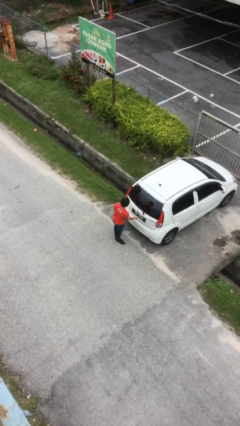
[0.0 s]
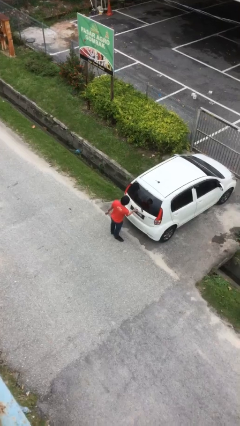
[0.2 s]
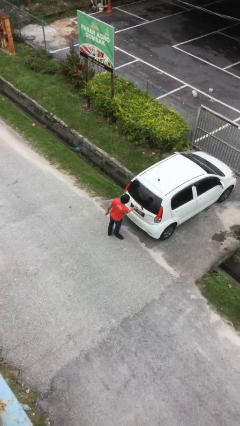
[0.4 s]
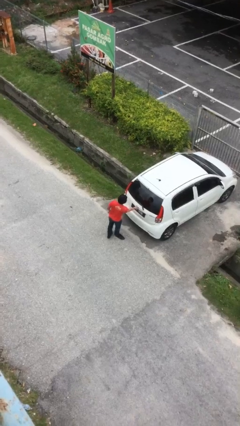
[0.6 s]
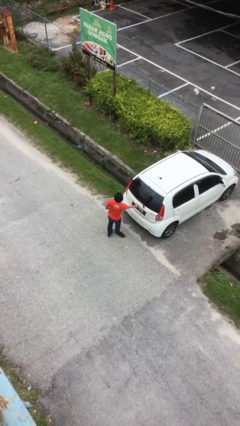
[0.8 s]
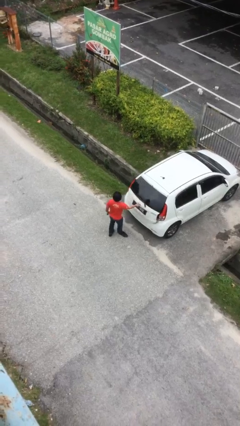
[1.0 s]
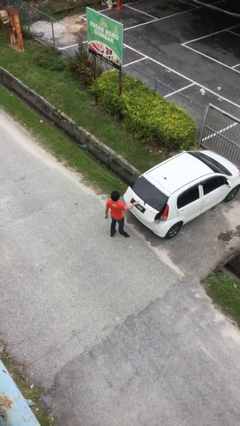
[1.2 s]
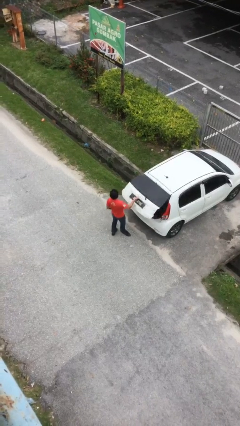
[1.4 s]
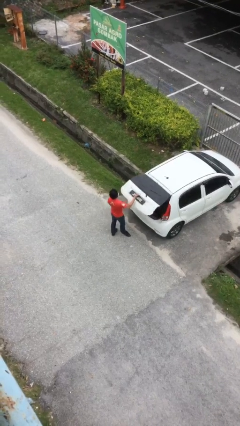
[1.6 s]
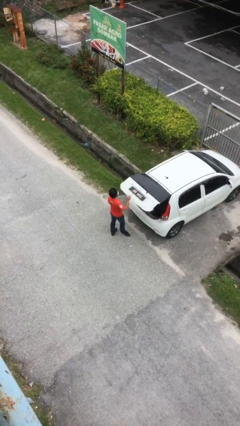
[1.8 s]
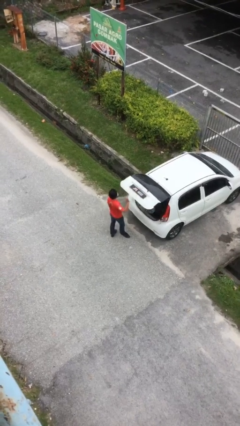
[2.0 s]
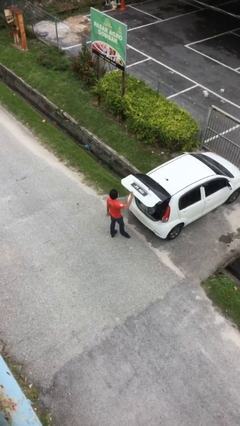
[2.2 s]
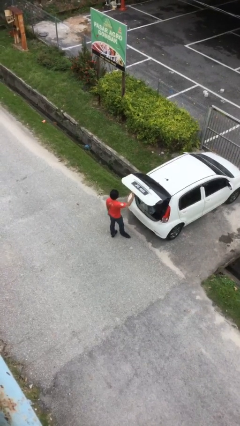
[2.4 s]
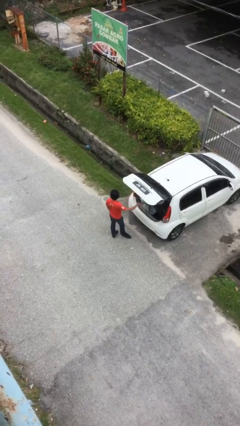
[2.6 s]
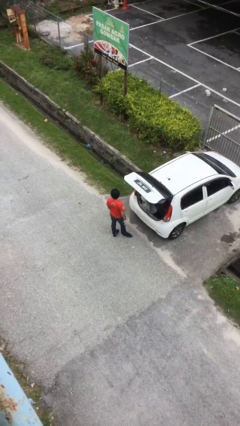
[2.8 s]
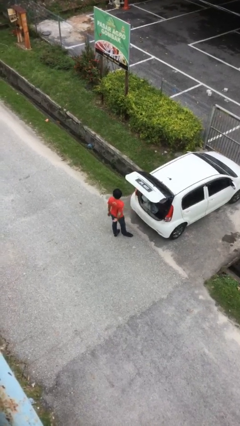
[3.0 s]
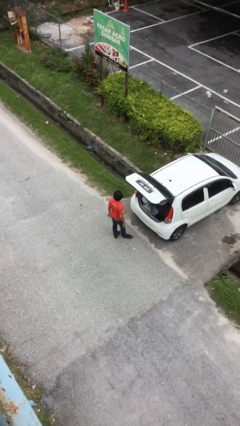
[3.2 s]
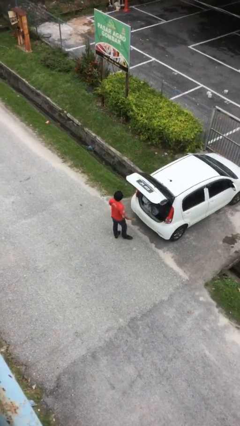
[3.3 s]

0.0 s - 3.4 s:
person opens car trunk

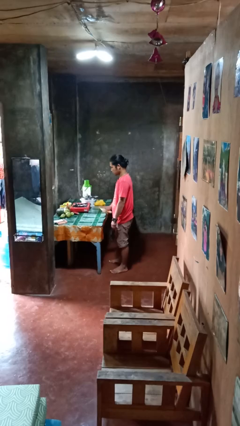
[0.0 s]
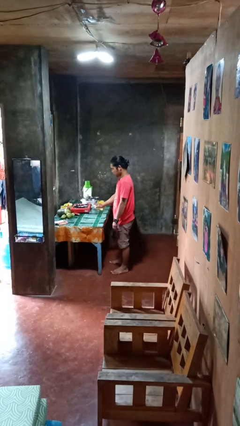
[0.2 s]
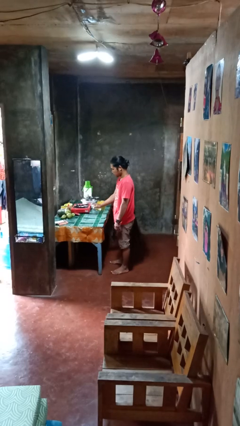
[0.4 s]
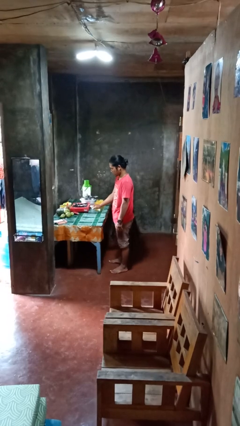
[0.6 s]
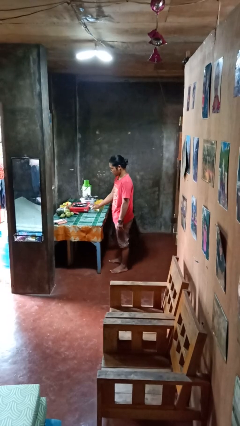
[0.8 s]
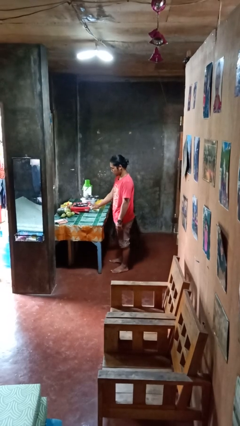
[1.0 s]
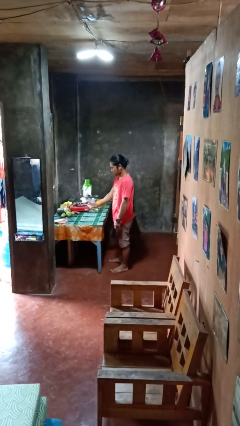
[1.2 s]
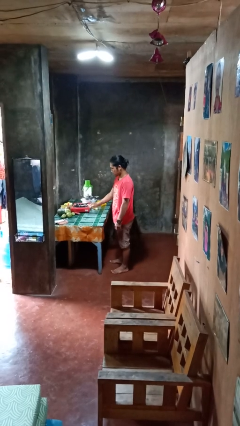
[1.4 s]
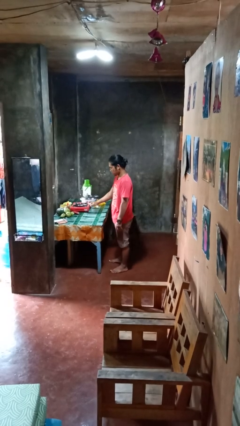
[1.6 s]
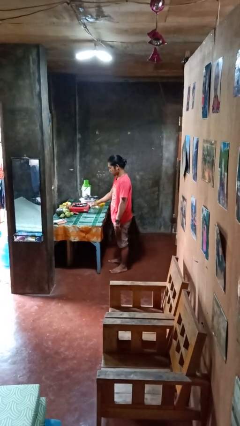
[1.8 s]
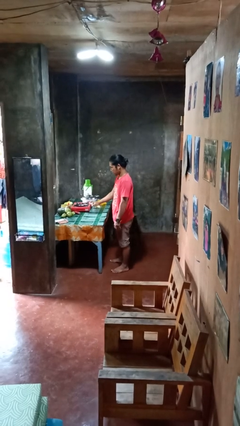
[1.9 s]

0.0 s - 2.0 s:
person sprays from bottle

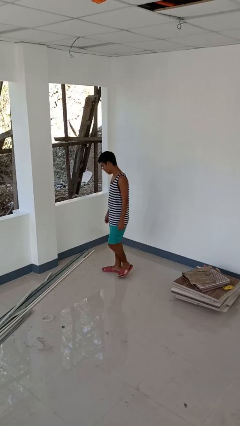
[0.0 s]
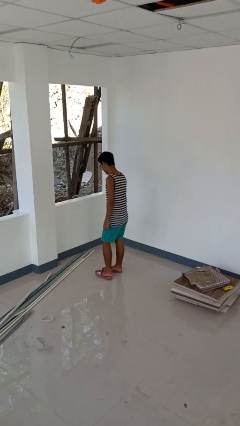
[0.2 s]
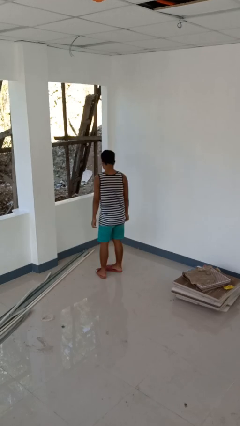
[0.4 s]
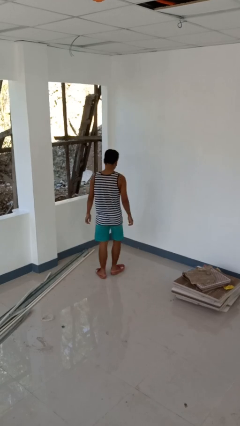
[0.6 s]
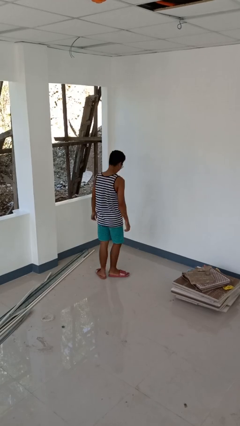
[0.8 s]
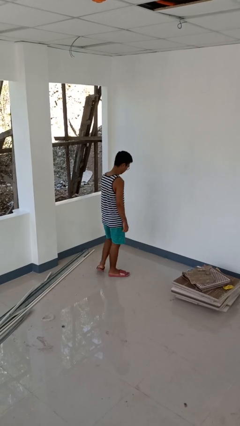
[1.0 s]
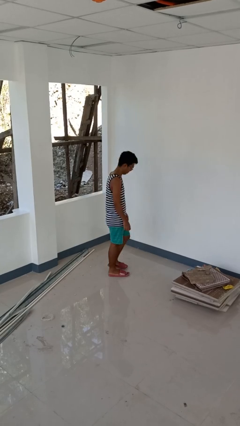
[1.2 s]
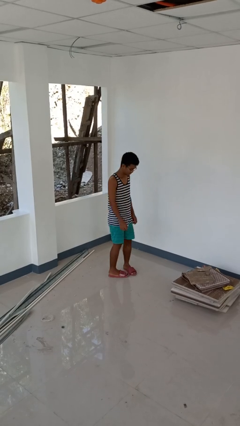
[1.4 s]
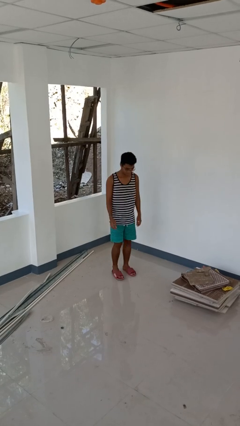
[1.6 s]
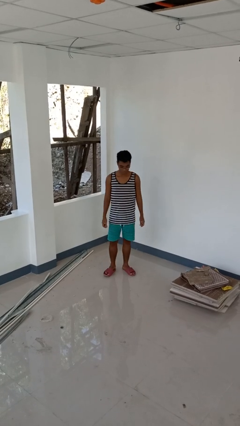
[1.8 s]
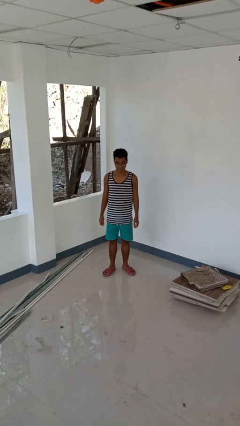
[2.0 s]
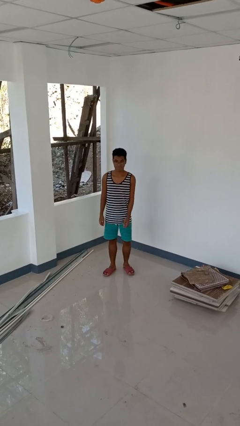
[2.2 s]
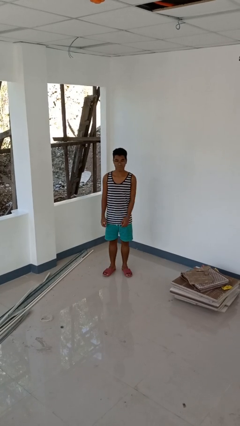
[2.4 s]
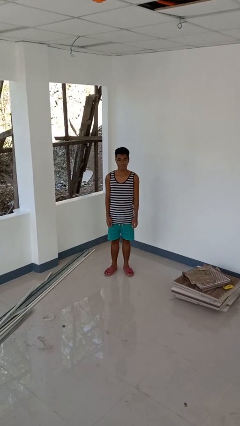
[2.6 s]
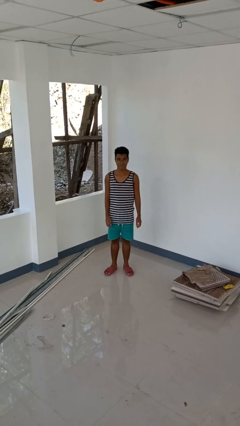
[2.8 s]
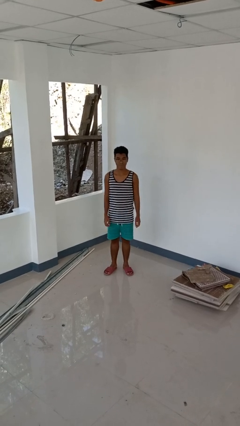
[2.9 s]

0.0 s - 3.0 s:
person twirls

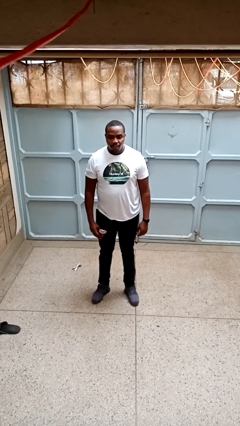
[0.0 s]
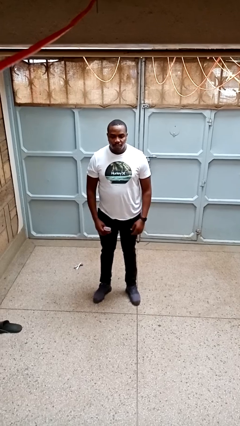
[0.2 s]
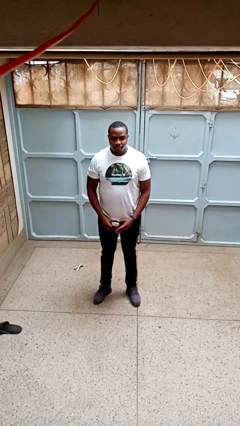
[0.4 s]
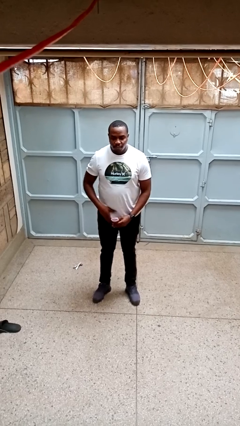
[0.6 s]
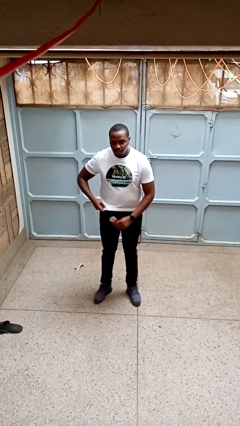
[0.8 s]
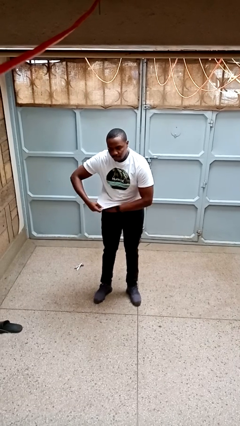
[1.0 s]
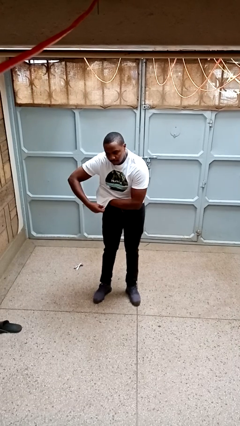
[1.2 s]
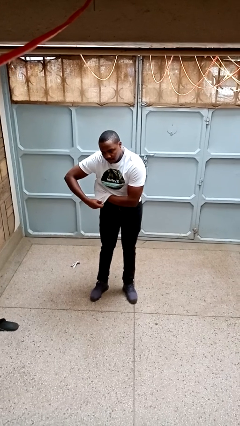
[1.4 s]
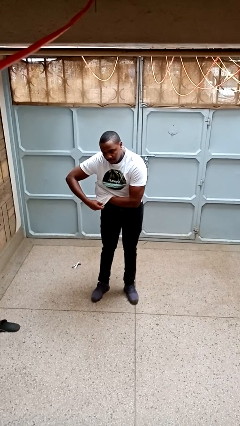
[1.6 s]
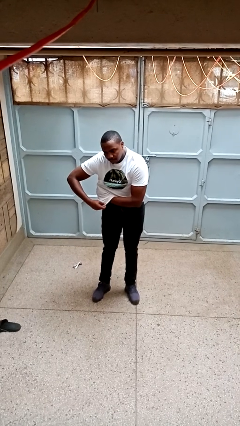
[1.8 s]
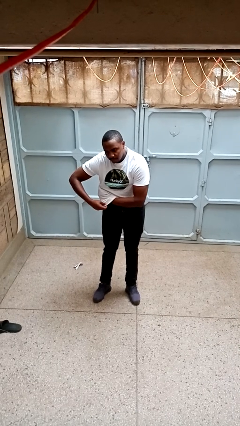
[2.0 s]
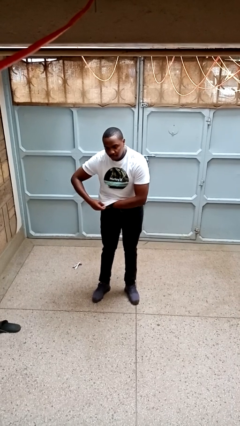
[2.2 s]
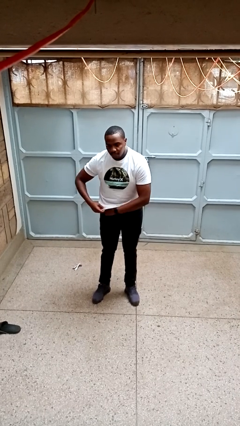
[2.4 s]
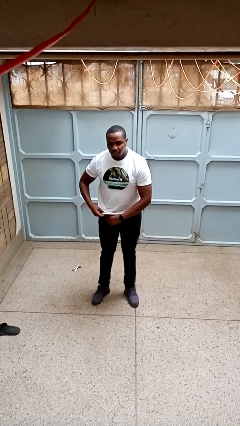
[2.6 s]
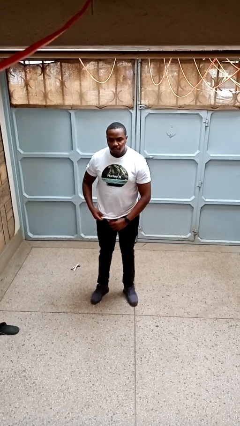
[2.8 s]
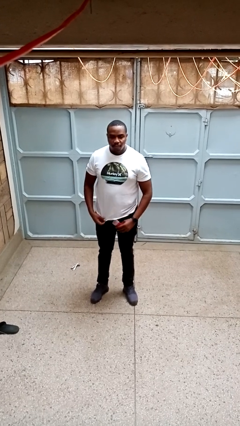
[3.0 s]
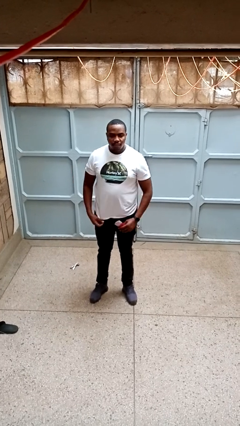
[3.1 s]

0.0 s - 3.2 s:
person applies deodorant

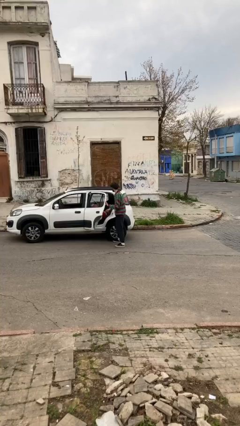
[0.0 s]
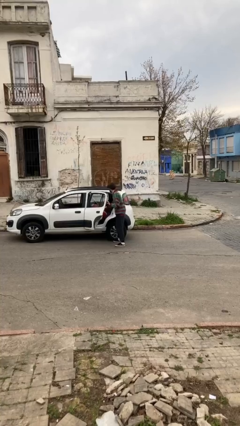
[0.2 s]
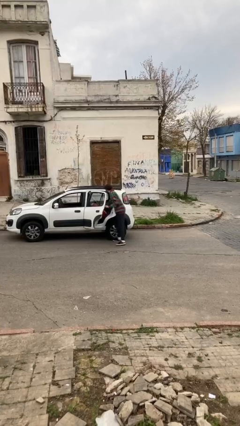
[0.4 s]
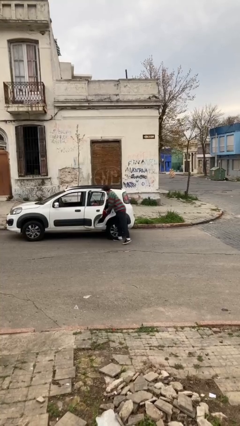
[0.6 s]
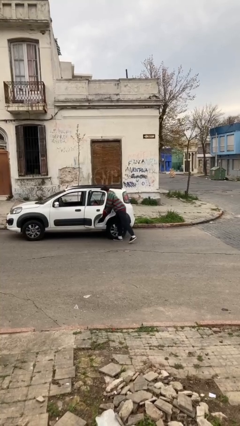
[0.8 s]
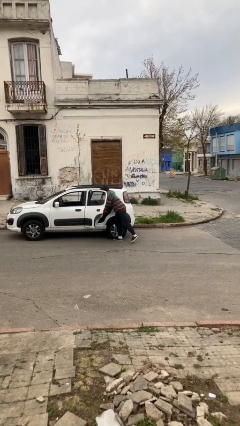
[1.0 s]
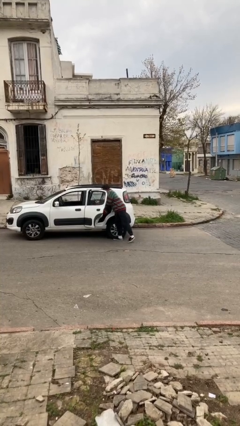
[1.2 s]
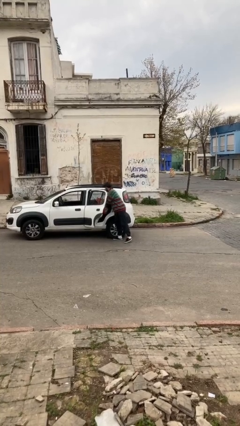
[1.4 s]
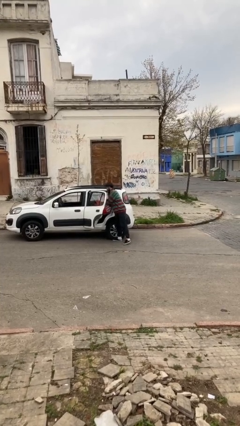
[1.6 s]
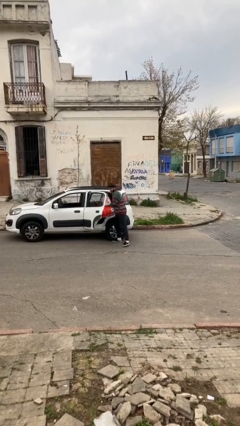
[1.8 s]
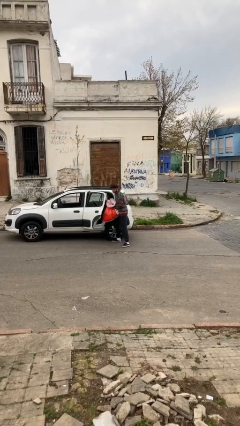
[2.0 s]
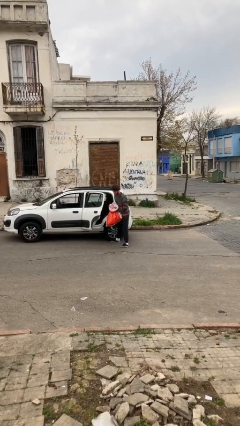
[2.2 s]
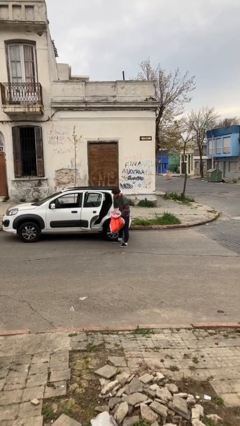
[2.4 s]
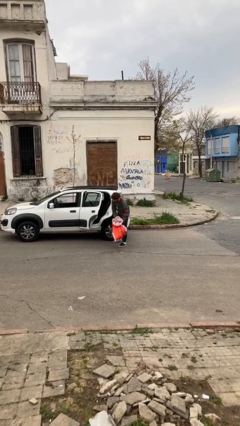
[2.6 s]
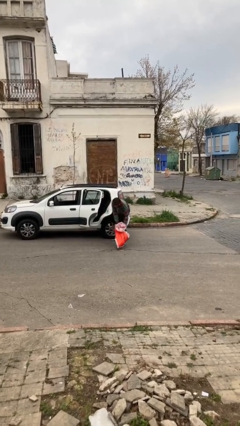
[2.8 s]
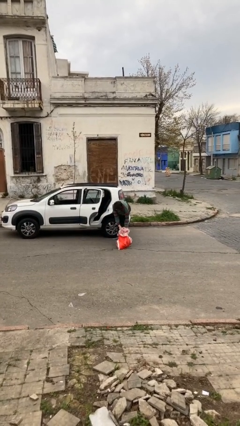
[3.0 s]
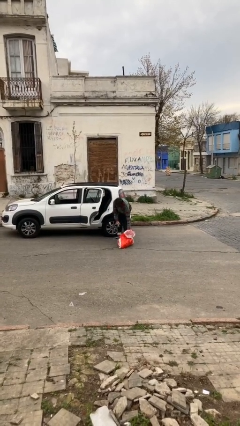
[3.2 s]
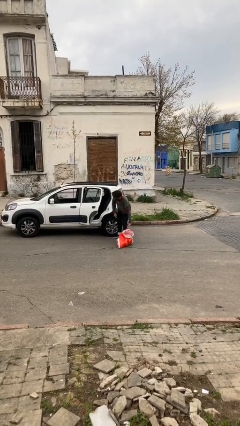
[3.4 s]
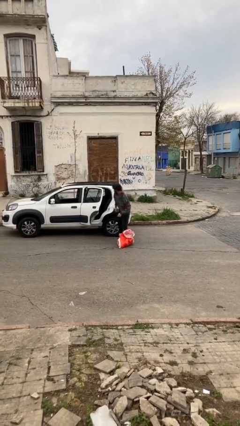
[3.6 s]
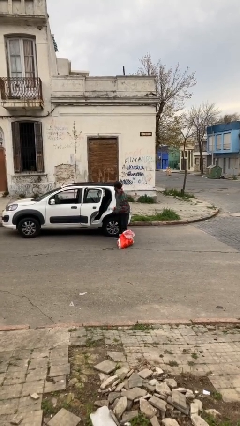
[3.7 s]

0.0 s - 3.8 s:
person unloads car

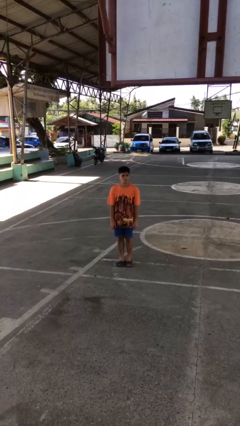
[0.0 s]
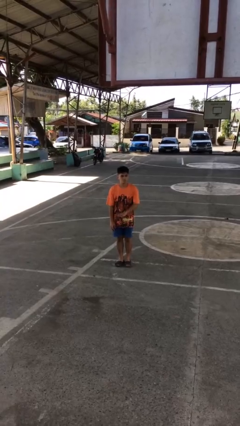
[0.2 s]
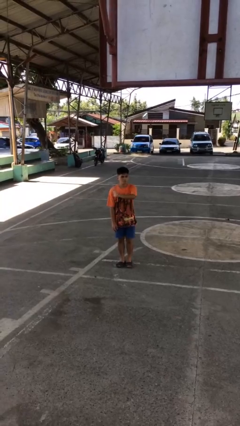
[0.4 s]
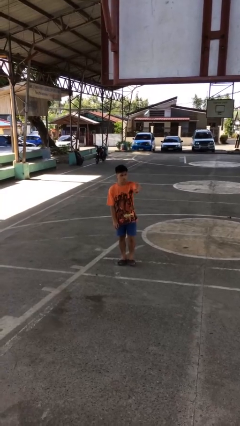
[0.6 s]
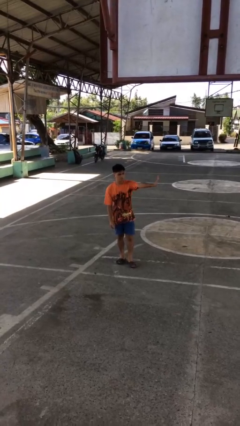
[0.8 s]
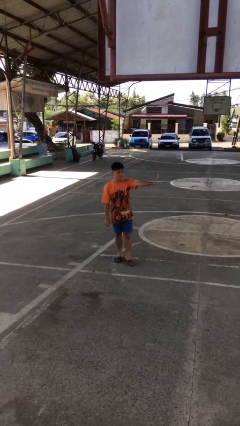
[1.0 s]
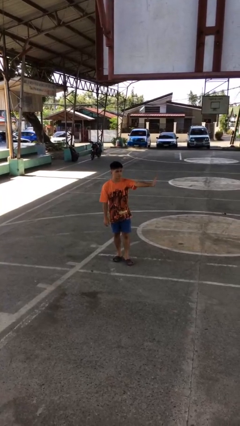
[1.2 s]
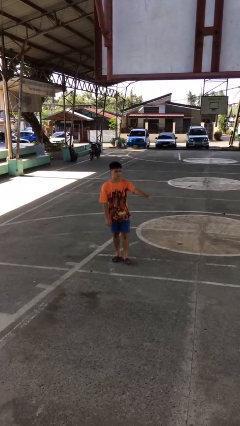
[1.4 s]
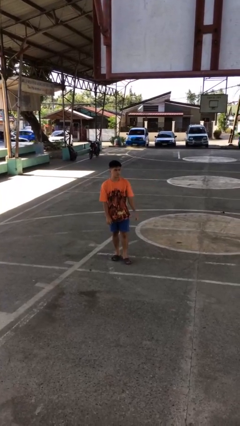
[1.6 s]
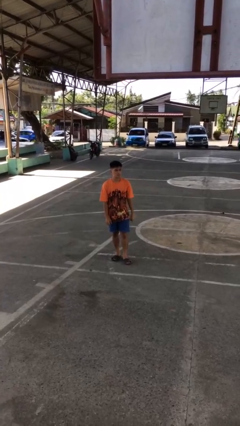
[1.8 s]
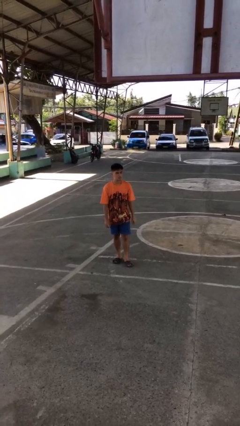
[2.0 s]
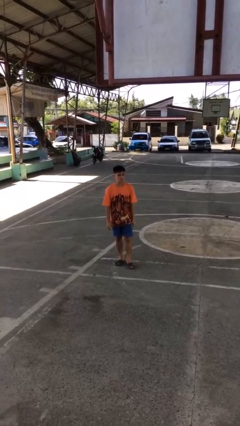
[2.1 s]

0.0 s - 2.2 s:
person gestures swipe left
